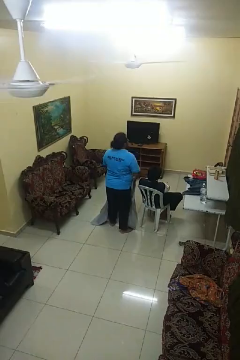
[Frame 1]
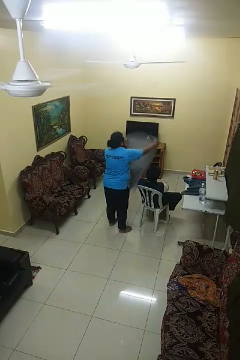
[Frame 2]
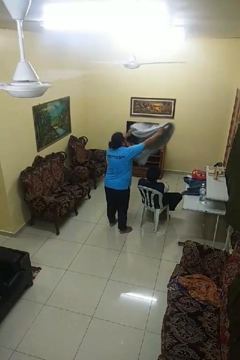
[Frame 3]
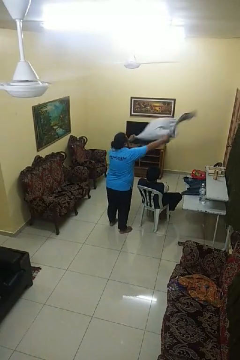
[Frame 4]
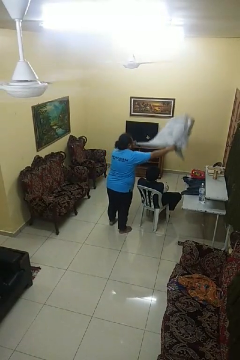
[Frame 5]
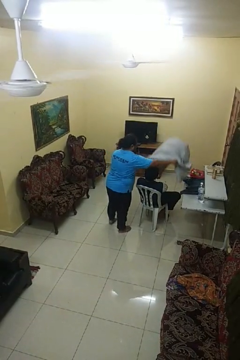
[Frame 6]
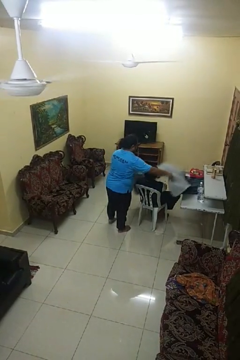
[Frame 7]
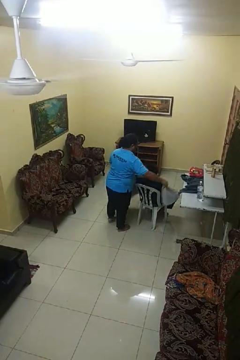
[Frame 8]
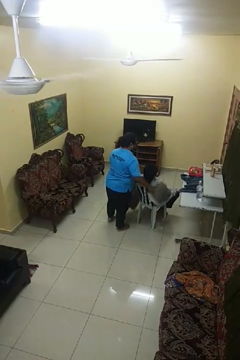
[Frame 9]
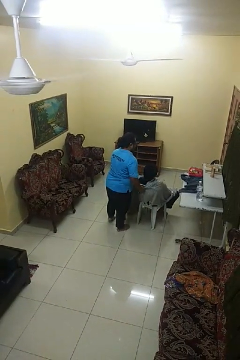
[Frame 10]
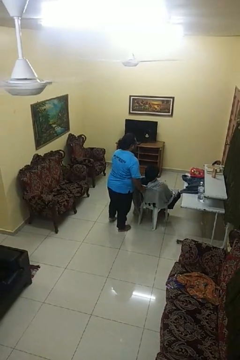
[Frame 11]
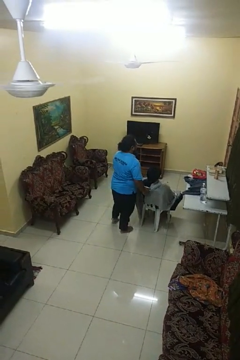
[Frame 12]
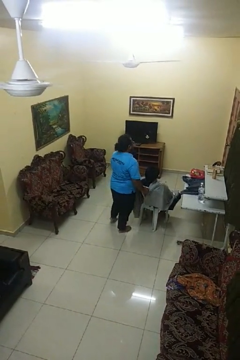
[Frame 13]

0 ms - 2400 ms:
person covers friend with blanket

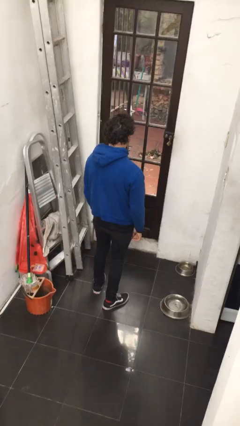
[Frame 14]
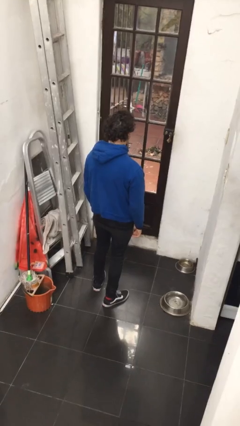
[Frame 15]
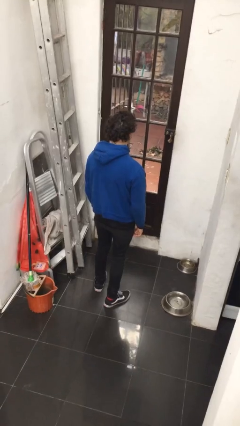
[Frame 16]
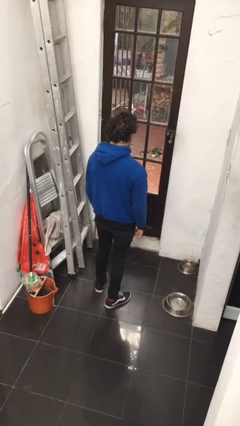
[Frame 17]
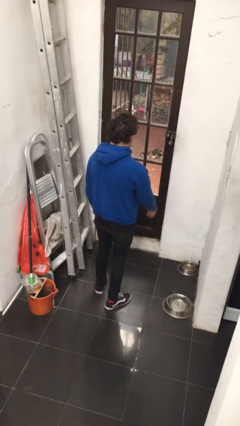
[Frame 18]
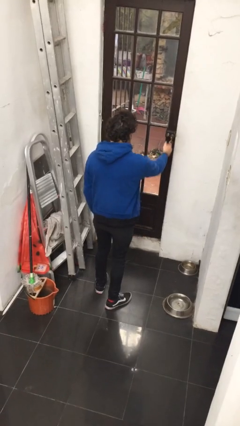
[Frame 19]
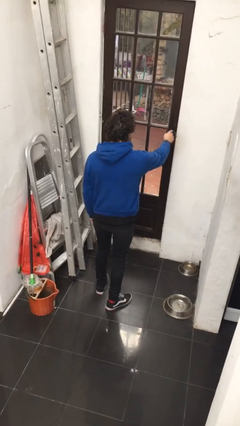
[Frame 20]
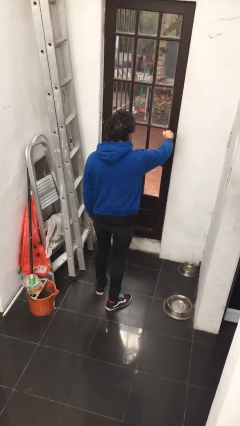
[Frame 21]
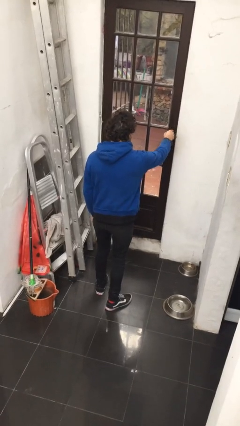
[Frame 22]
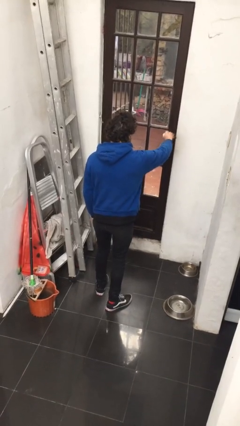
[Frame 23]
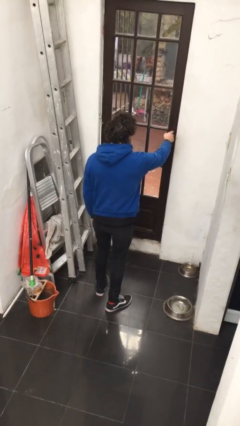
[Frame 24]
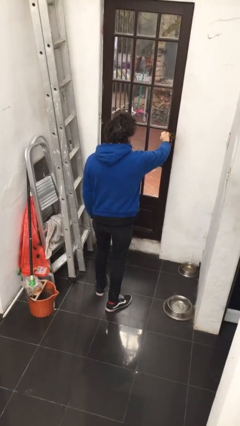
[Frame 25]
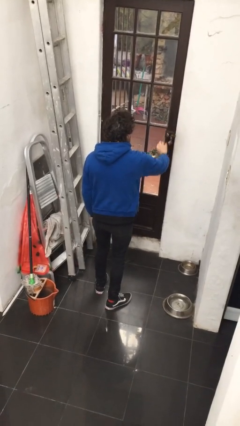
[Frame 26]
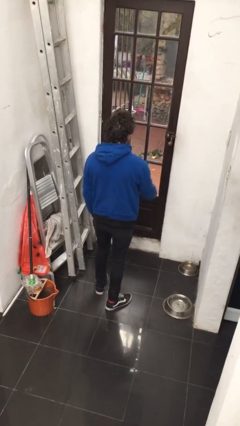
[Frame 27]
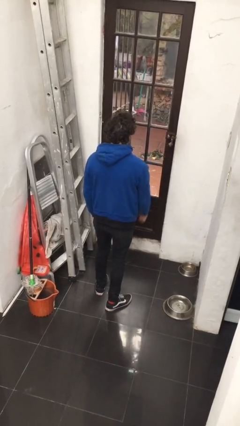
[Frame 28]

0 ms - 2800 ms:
person unlocks door with keys

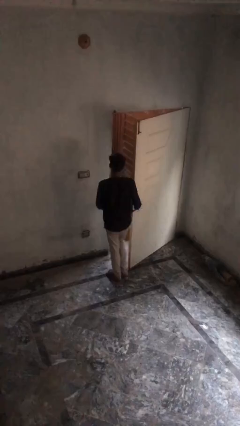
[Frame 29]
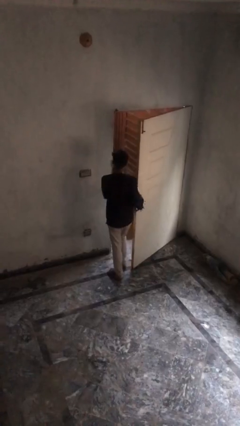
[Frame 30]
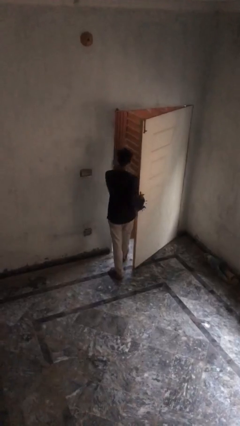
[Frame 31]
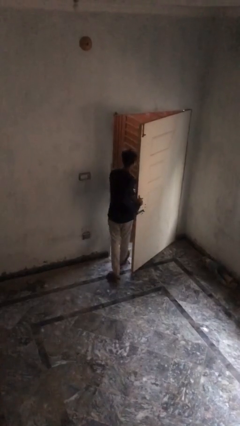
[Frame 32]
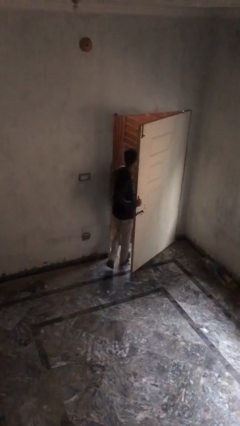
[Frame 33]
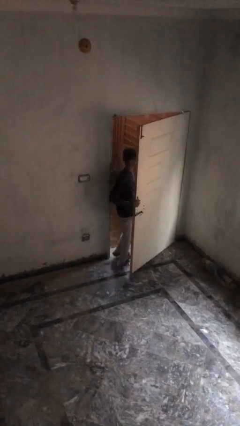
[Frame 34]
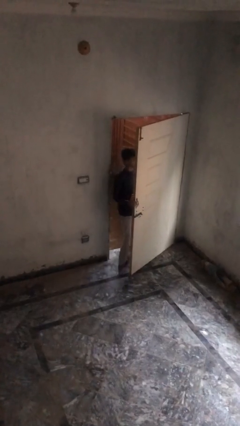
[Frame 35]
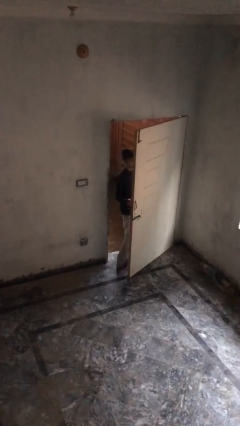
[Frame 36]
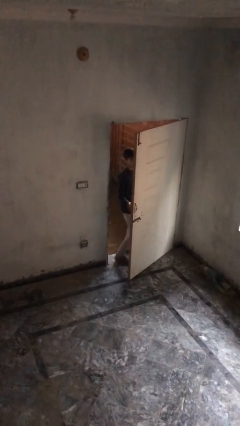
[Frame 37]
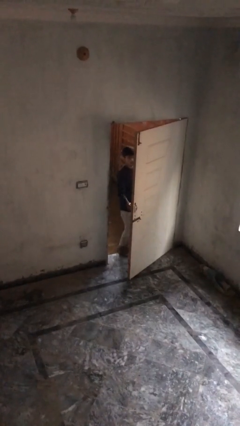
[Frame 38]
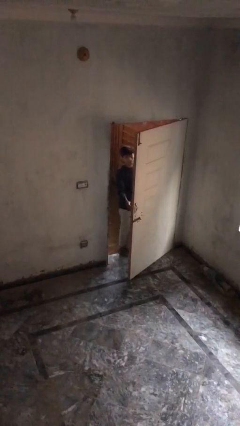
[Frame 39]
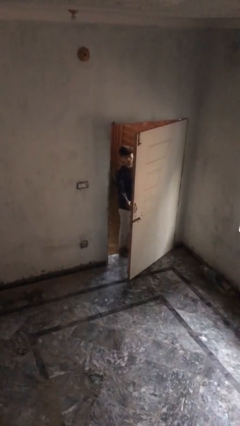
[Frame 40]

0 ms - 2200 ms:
person exits scene through structure

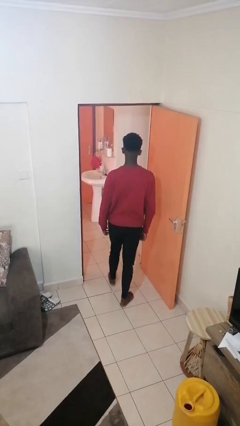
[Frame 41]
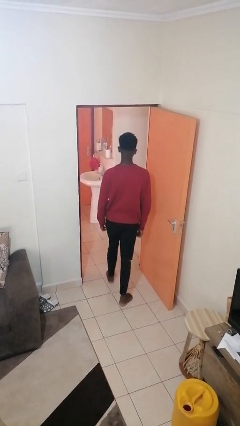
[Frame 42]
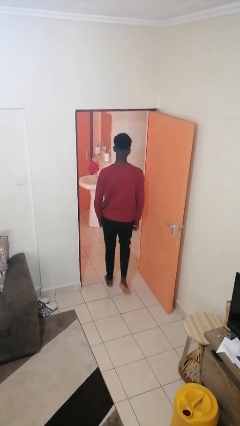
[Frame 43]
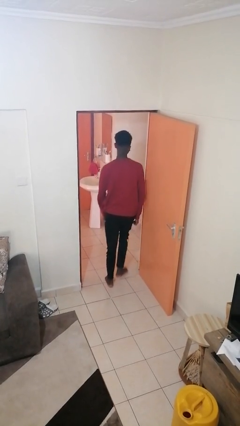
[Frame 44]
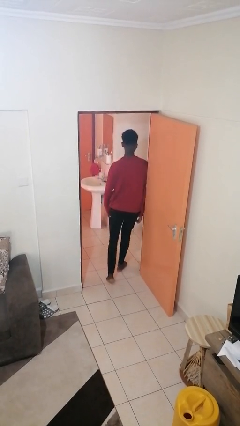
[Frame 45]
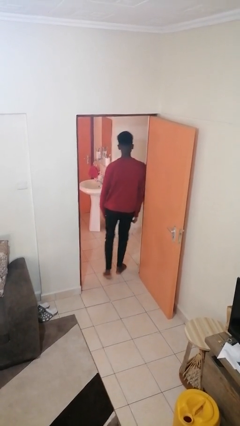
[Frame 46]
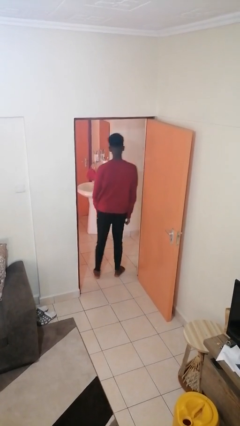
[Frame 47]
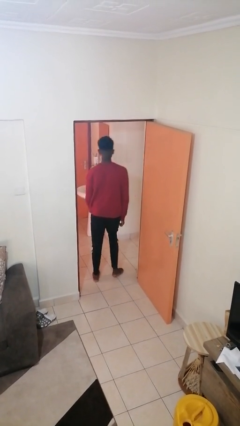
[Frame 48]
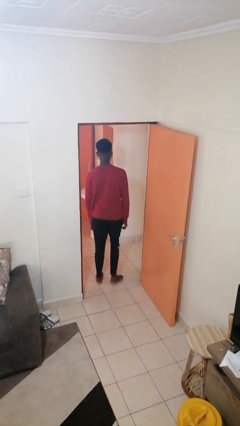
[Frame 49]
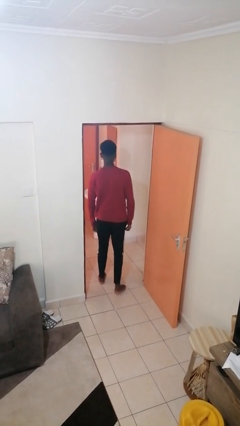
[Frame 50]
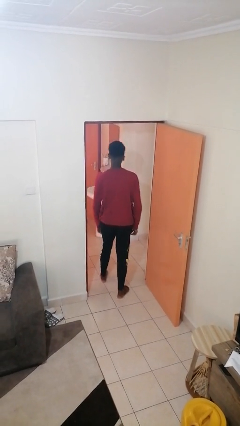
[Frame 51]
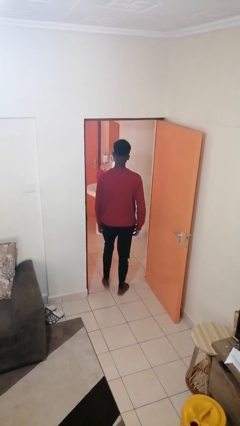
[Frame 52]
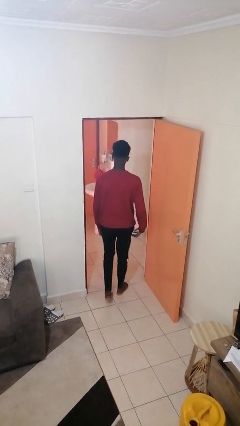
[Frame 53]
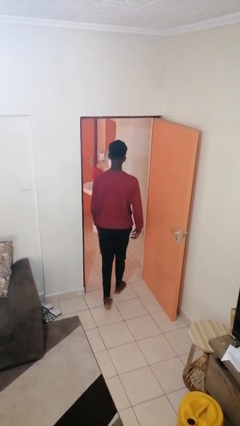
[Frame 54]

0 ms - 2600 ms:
person bumps into wall

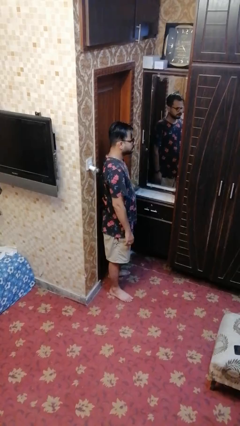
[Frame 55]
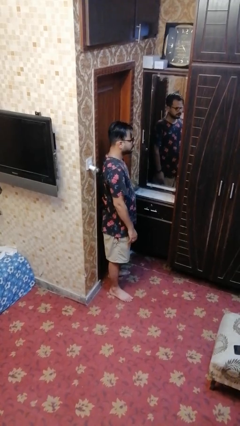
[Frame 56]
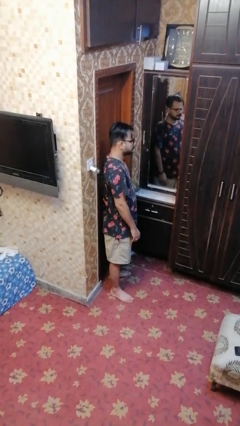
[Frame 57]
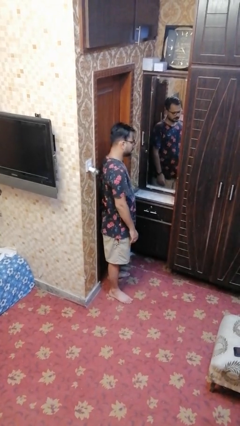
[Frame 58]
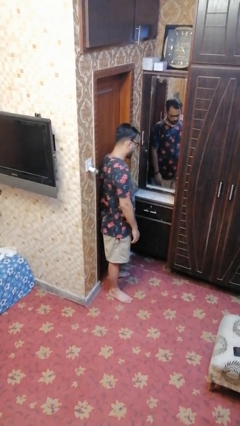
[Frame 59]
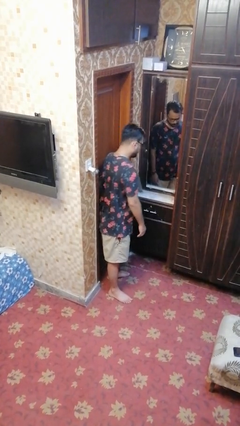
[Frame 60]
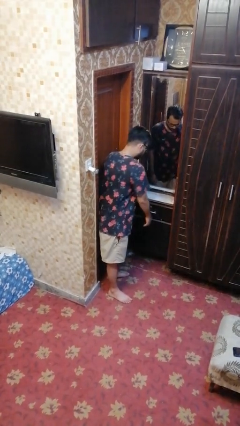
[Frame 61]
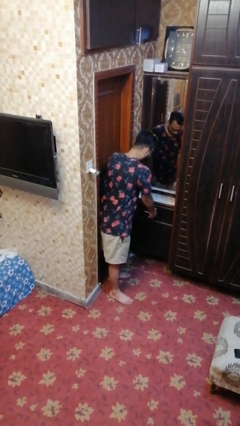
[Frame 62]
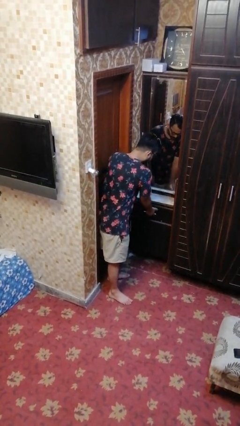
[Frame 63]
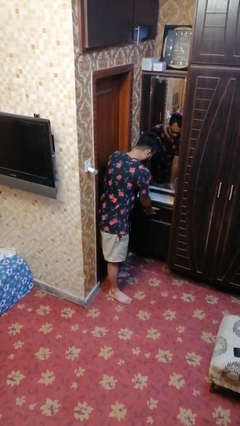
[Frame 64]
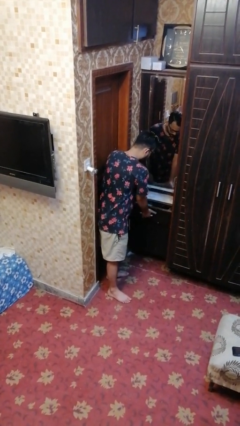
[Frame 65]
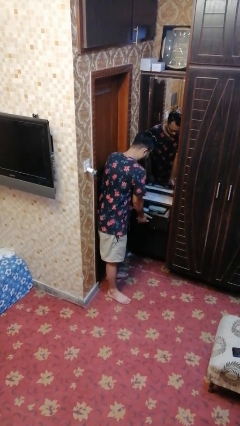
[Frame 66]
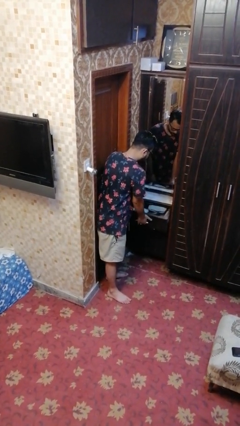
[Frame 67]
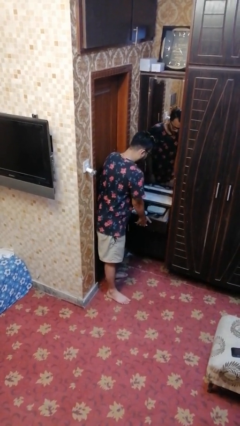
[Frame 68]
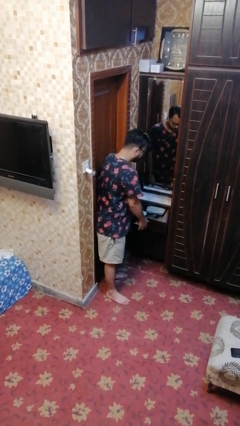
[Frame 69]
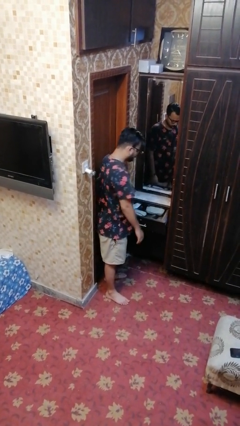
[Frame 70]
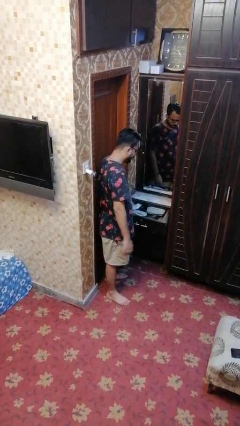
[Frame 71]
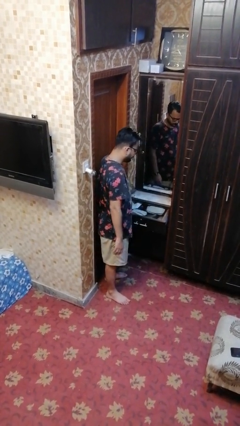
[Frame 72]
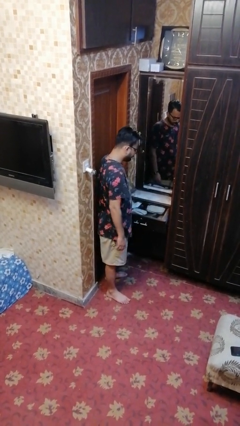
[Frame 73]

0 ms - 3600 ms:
person opens dresser drawer

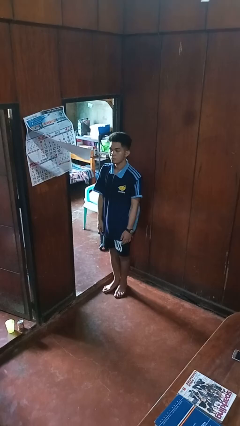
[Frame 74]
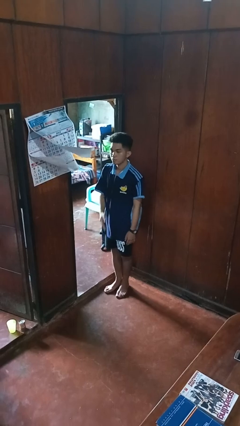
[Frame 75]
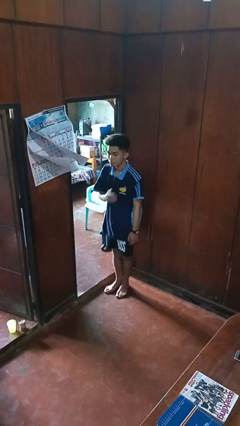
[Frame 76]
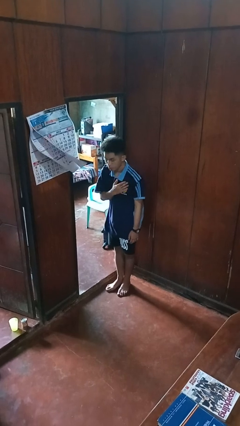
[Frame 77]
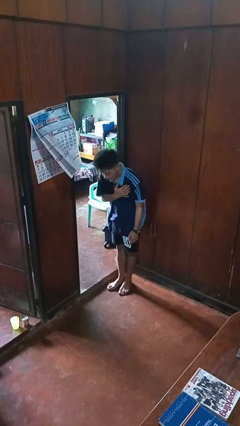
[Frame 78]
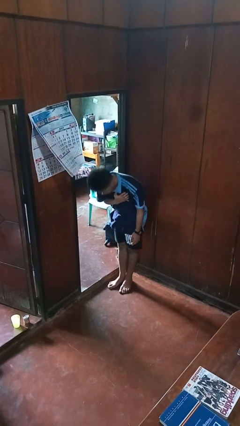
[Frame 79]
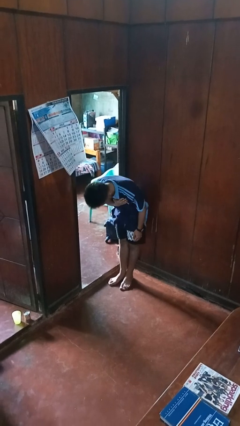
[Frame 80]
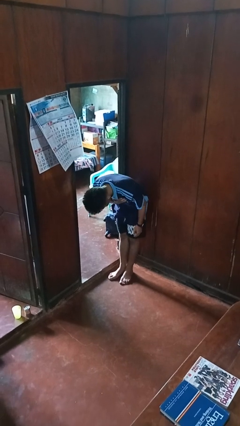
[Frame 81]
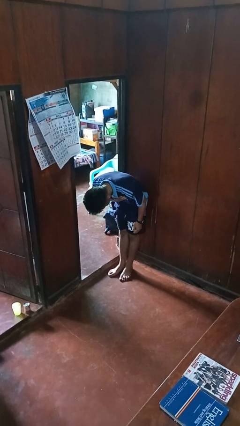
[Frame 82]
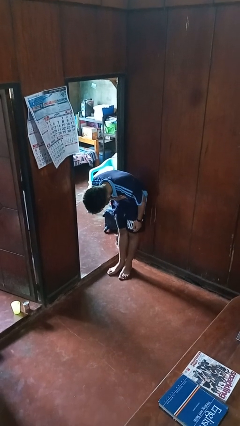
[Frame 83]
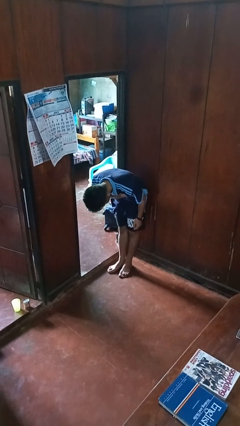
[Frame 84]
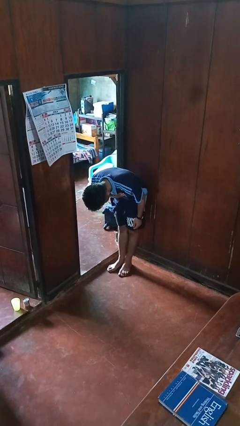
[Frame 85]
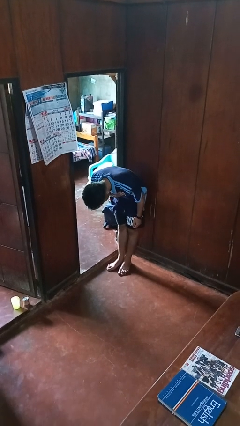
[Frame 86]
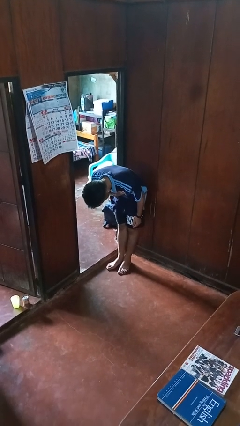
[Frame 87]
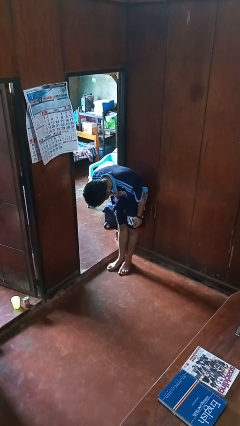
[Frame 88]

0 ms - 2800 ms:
person bows

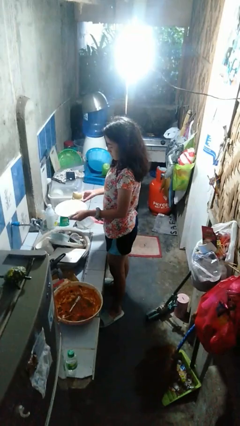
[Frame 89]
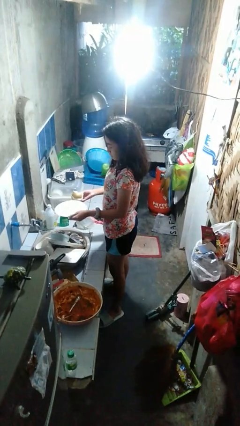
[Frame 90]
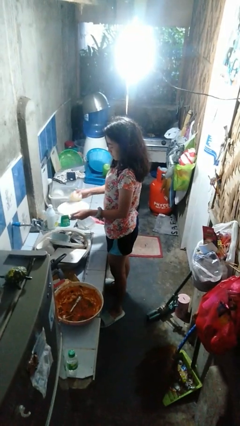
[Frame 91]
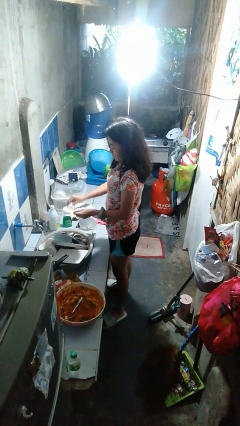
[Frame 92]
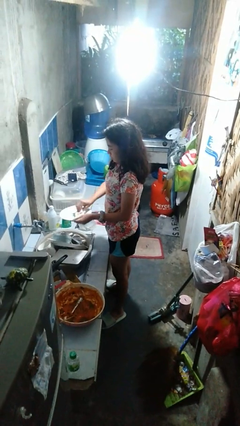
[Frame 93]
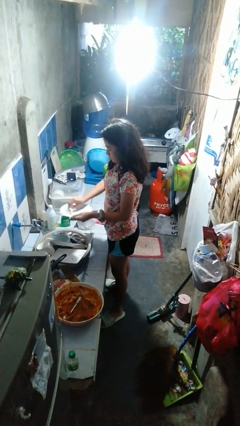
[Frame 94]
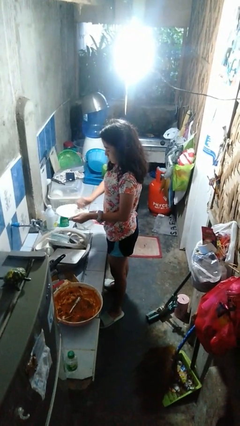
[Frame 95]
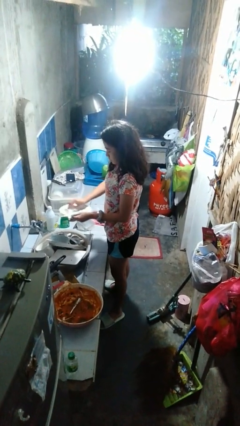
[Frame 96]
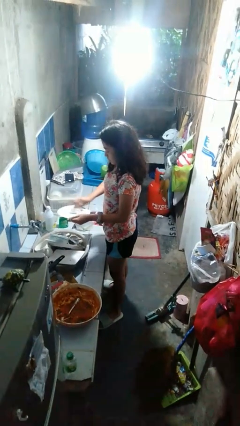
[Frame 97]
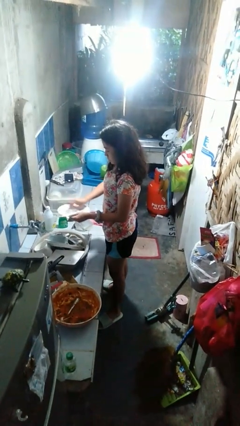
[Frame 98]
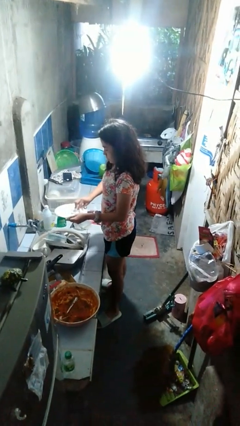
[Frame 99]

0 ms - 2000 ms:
person washes dish
